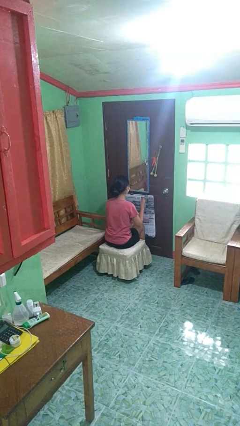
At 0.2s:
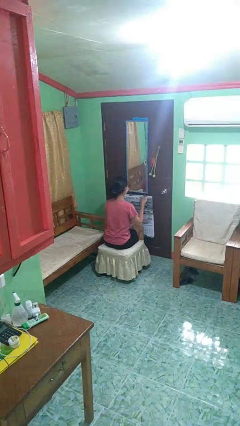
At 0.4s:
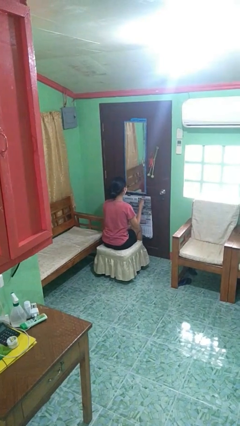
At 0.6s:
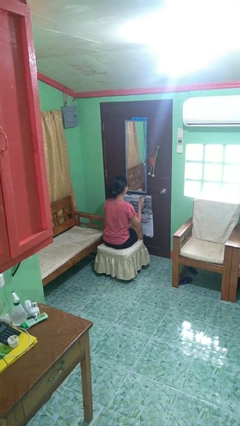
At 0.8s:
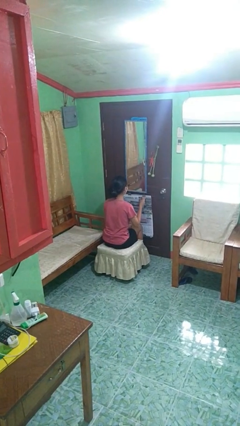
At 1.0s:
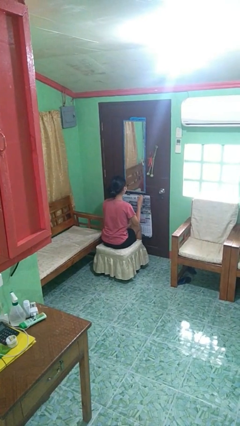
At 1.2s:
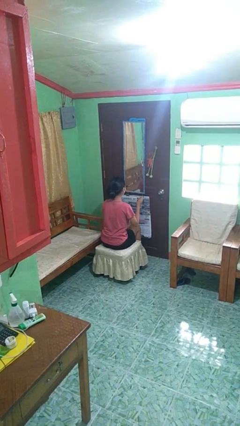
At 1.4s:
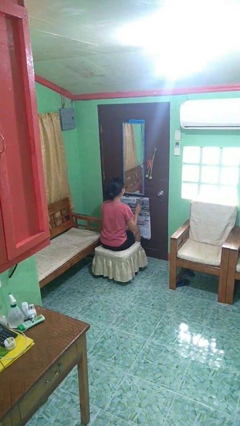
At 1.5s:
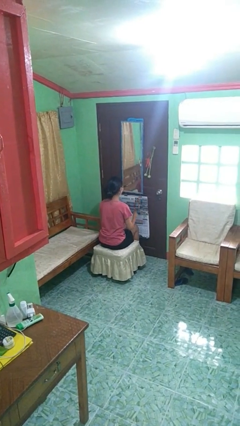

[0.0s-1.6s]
person snaps fingers

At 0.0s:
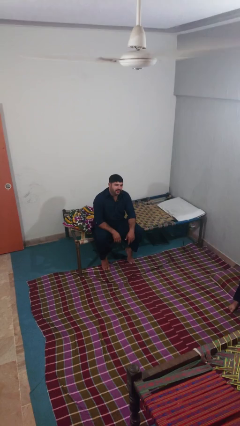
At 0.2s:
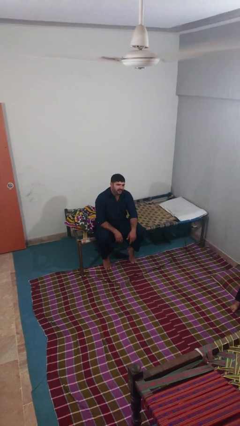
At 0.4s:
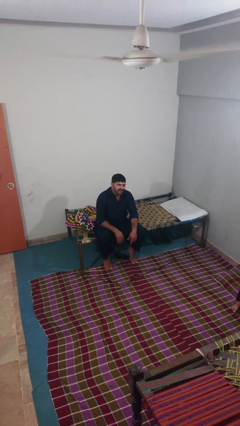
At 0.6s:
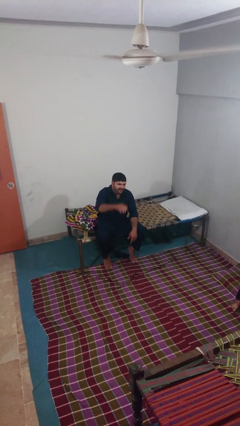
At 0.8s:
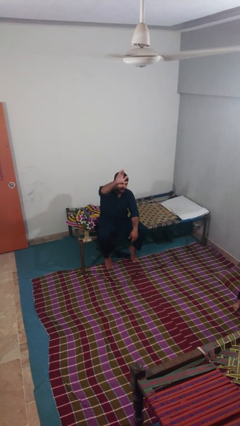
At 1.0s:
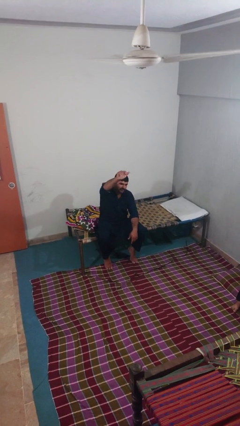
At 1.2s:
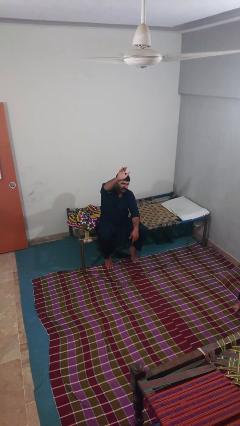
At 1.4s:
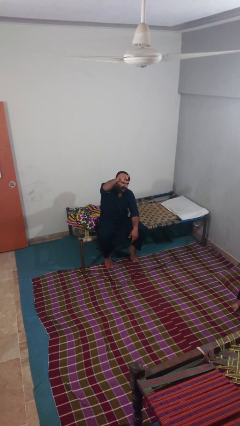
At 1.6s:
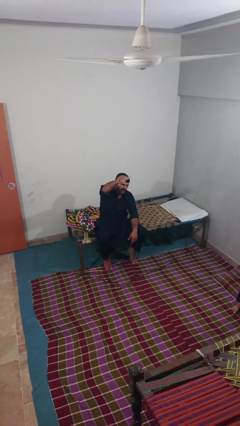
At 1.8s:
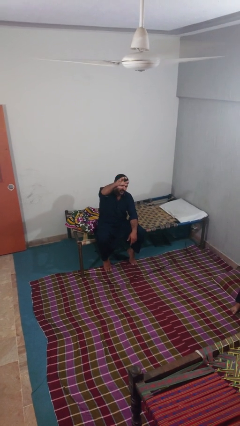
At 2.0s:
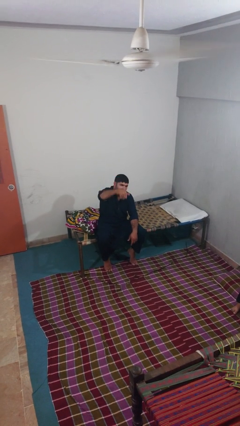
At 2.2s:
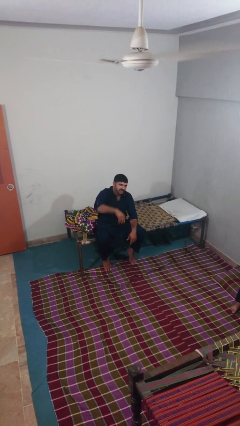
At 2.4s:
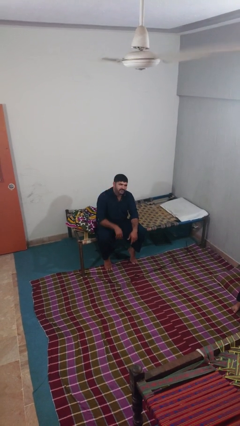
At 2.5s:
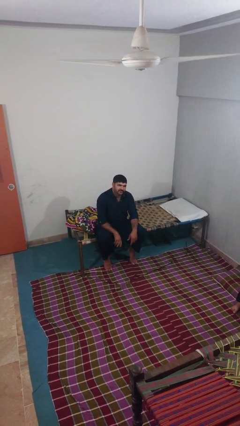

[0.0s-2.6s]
person gestures come here

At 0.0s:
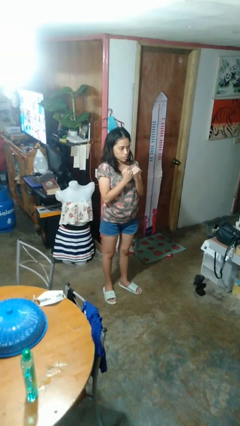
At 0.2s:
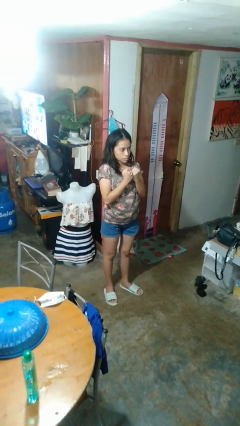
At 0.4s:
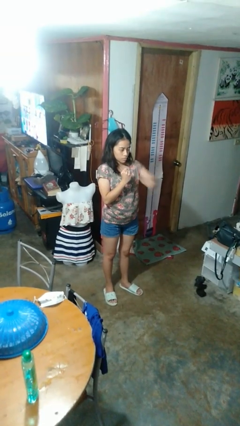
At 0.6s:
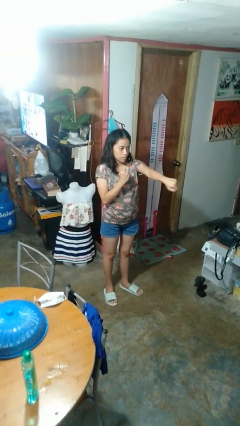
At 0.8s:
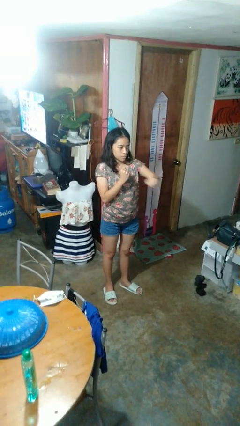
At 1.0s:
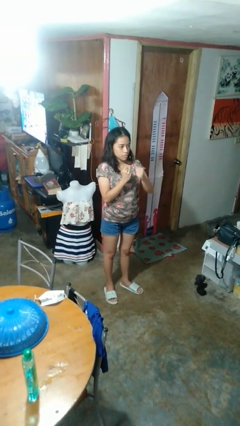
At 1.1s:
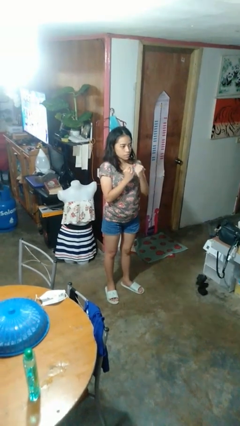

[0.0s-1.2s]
person punches

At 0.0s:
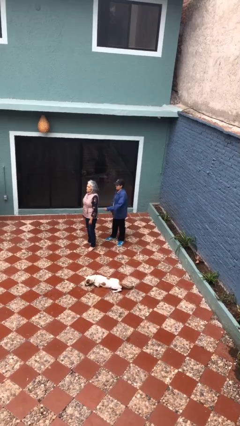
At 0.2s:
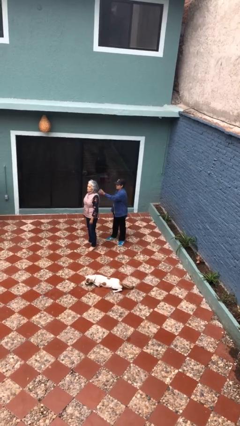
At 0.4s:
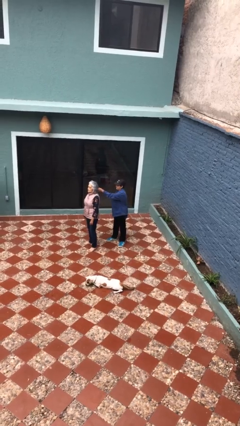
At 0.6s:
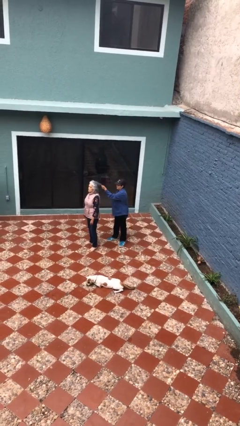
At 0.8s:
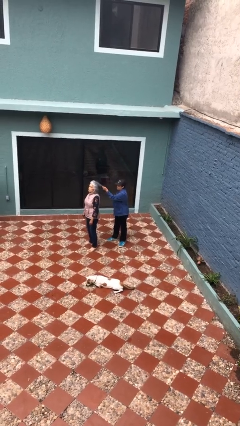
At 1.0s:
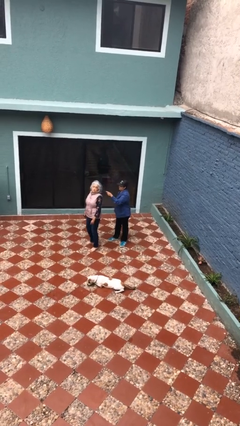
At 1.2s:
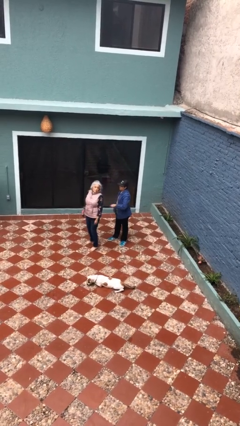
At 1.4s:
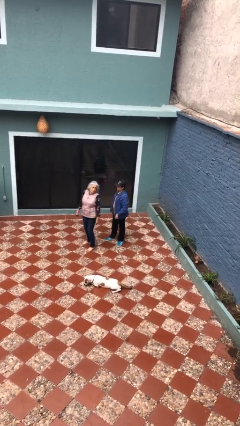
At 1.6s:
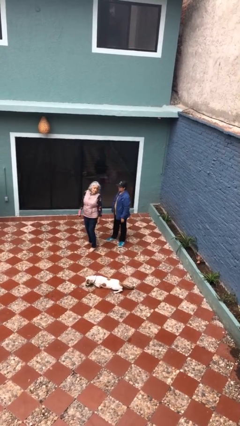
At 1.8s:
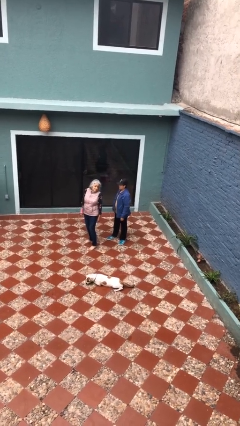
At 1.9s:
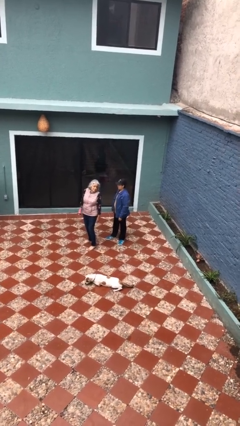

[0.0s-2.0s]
person grabs person by hair

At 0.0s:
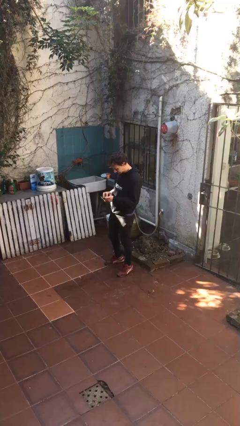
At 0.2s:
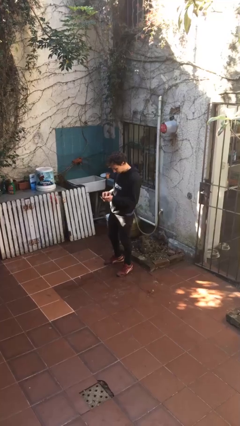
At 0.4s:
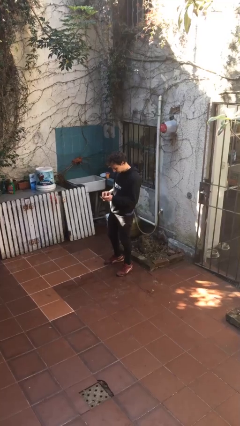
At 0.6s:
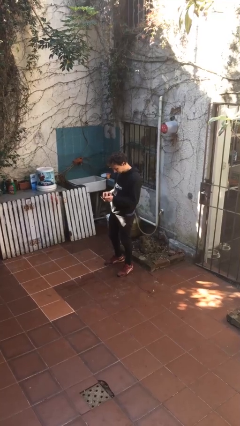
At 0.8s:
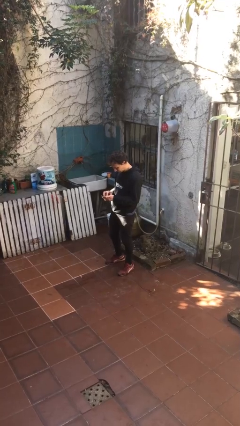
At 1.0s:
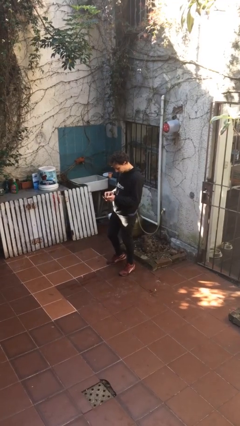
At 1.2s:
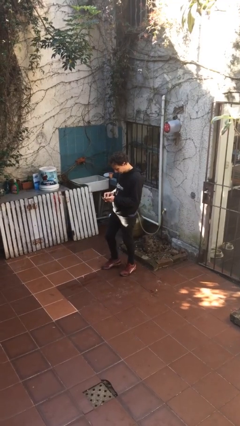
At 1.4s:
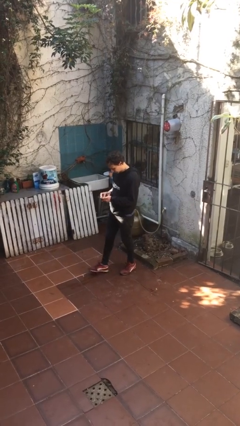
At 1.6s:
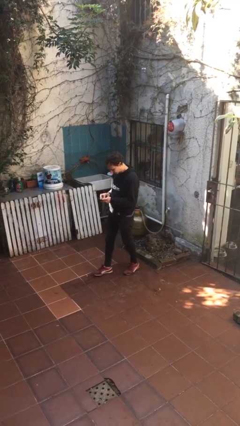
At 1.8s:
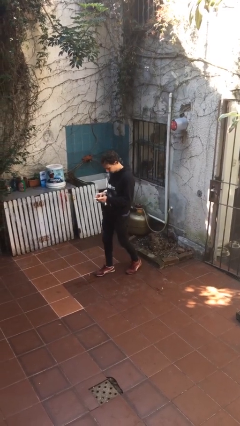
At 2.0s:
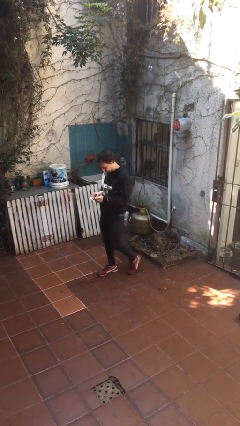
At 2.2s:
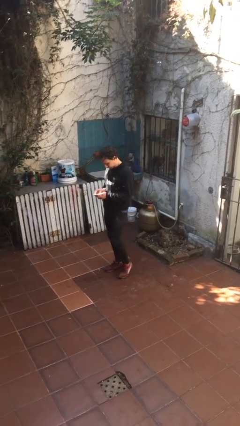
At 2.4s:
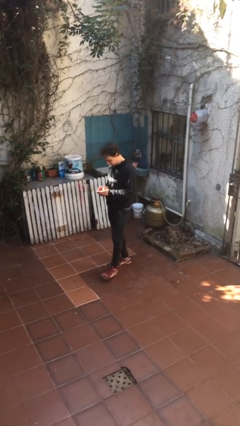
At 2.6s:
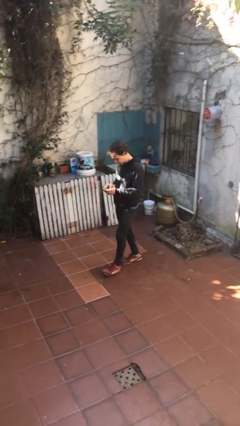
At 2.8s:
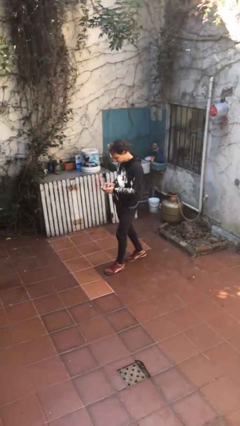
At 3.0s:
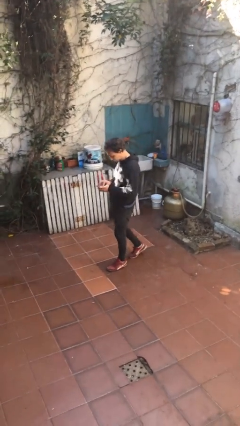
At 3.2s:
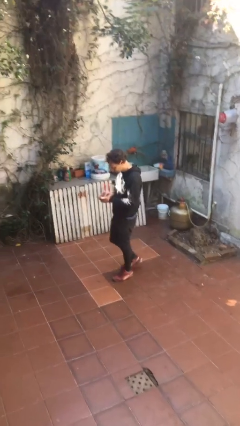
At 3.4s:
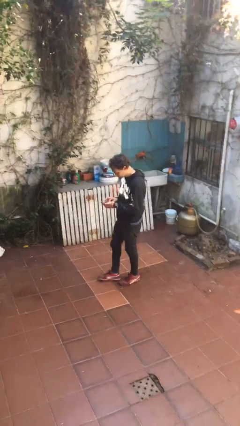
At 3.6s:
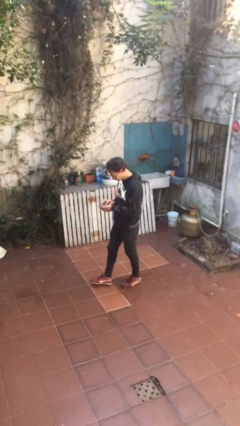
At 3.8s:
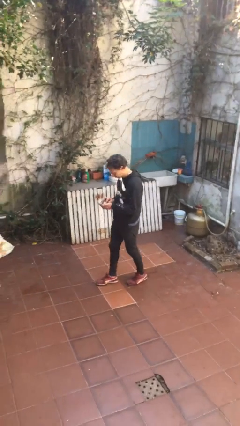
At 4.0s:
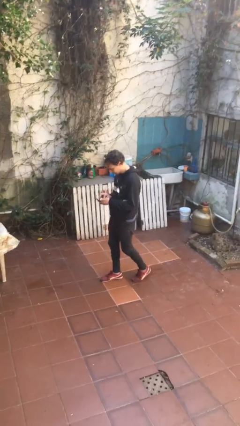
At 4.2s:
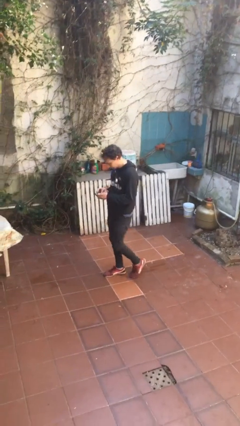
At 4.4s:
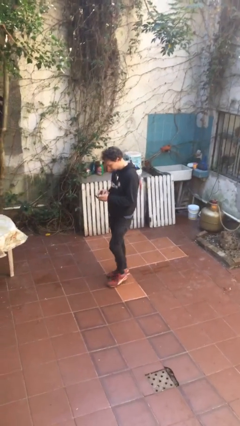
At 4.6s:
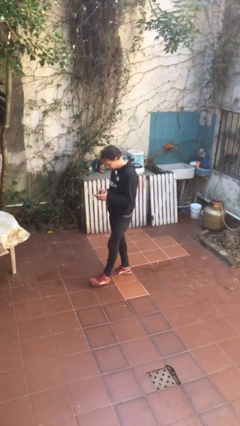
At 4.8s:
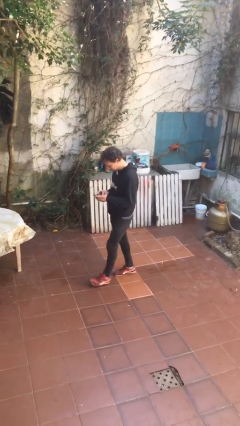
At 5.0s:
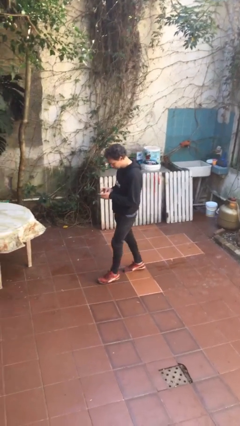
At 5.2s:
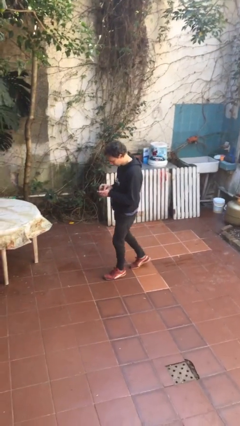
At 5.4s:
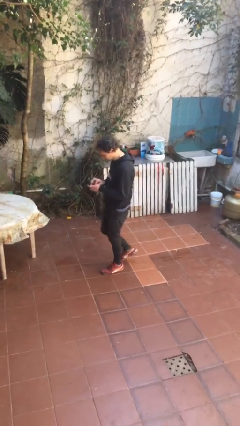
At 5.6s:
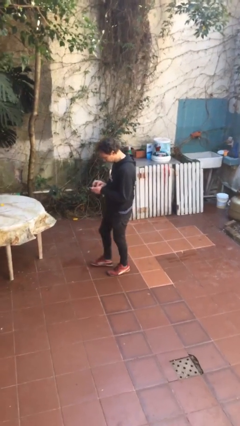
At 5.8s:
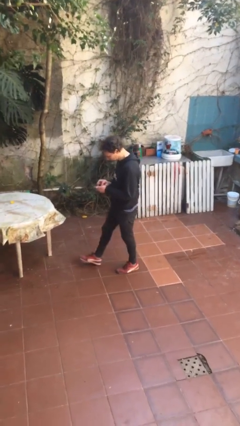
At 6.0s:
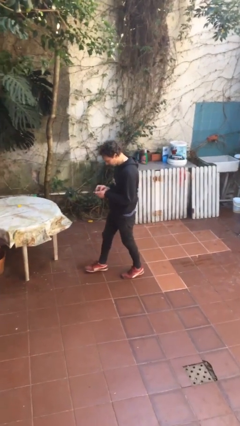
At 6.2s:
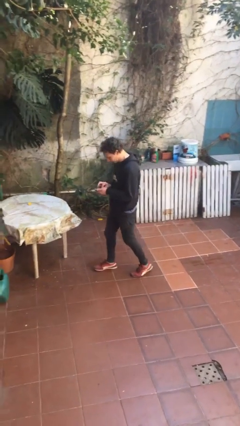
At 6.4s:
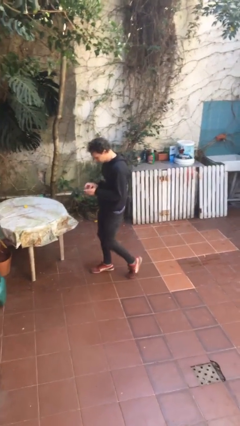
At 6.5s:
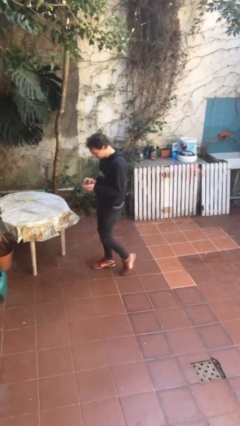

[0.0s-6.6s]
person texts on phone

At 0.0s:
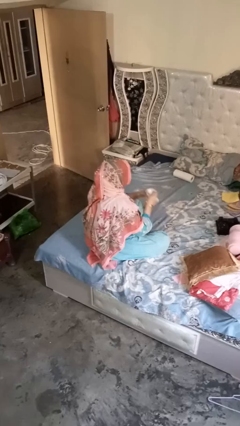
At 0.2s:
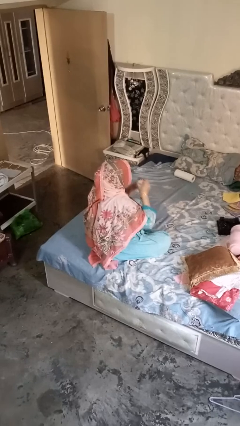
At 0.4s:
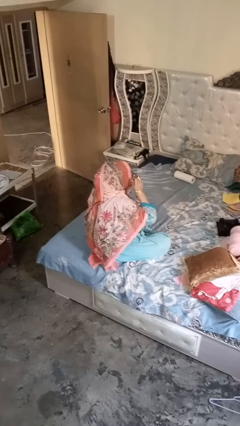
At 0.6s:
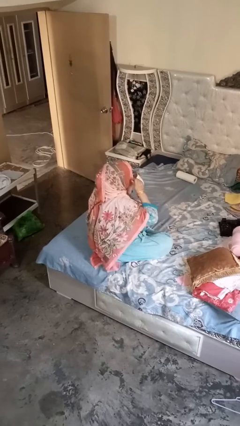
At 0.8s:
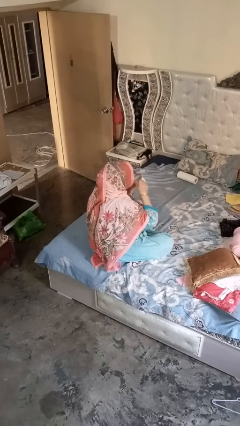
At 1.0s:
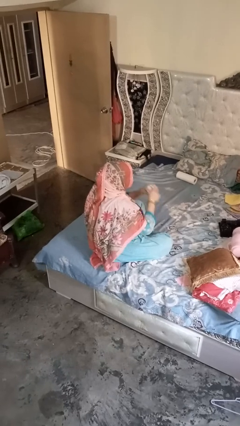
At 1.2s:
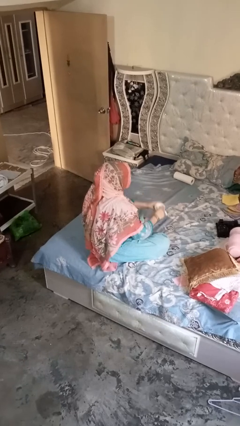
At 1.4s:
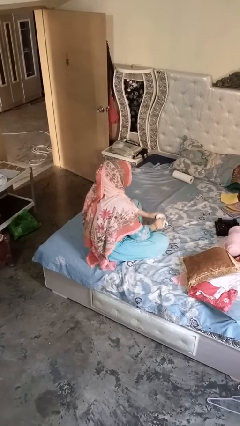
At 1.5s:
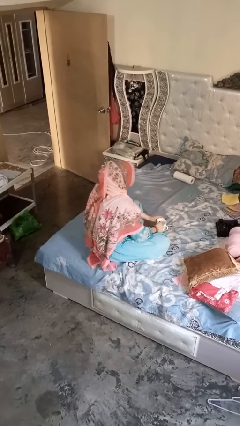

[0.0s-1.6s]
person drinks from mug

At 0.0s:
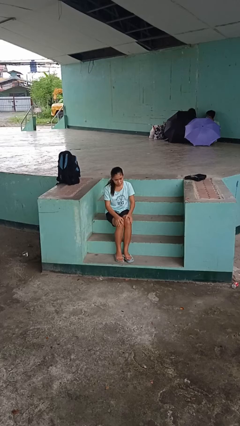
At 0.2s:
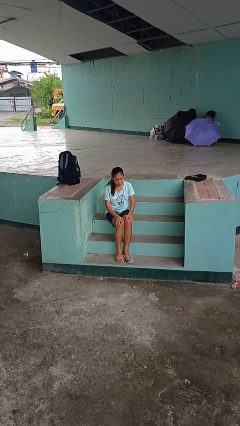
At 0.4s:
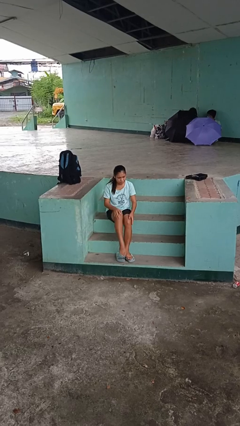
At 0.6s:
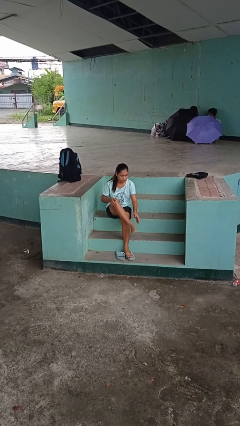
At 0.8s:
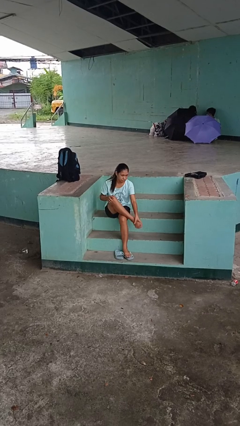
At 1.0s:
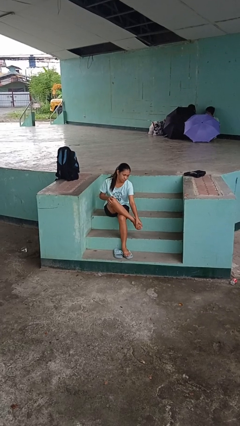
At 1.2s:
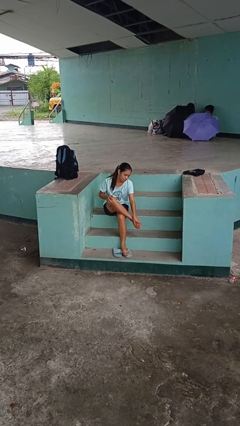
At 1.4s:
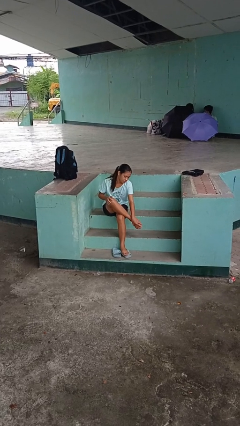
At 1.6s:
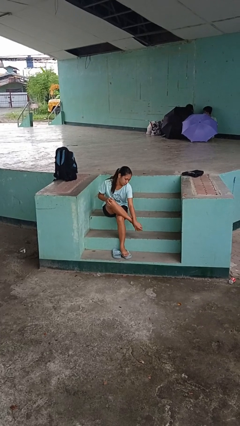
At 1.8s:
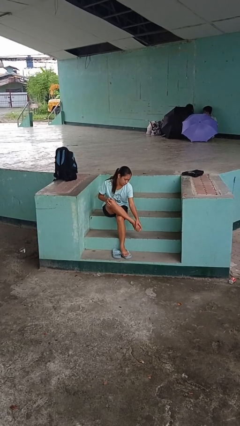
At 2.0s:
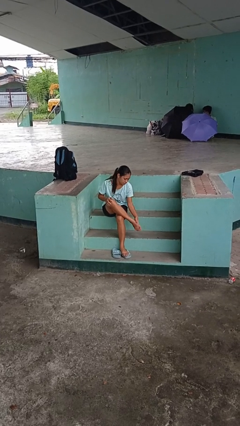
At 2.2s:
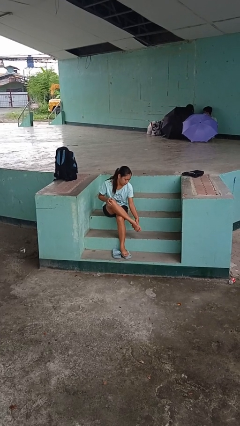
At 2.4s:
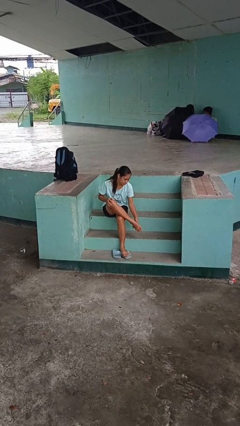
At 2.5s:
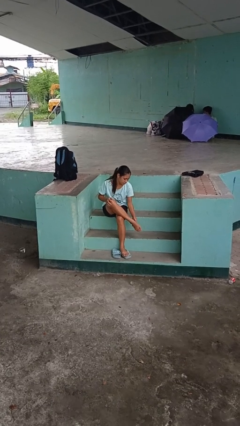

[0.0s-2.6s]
person rubs foot
